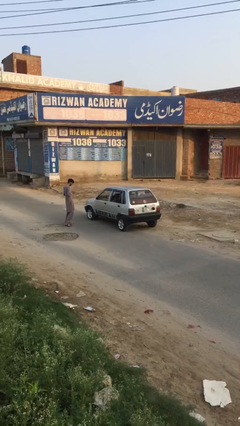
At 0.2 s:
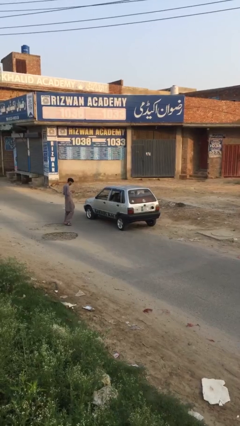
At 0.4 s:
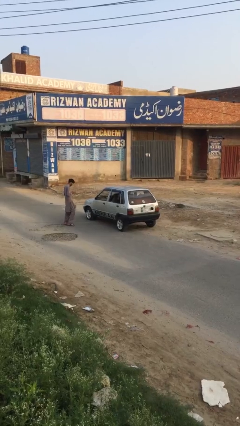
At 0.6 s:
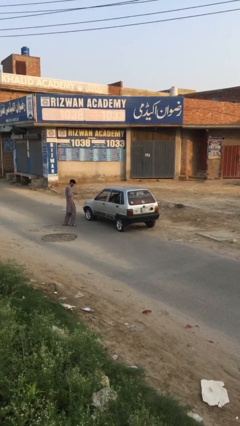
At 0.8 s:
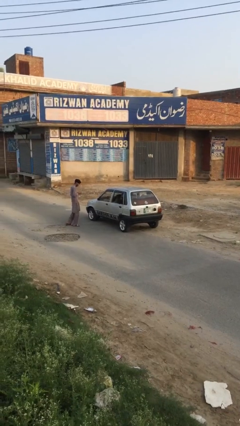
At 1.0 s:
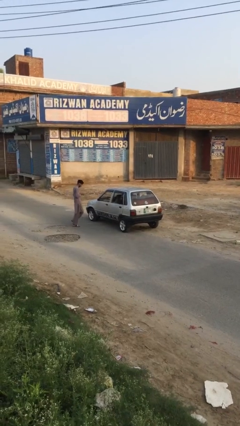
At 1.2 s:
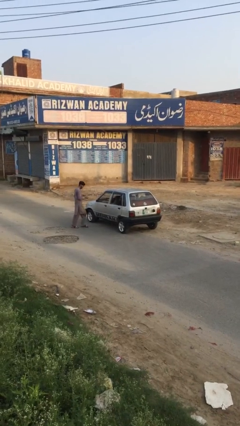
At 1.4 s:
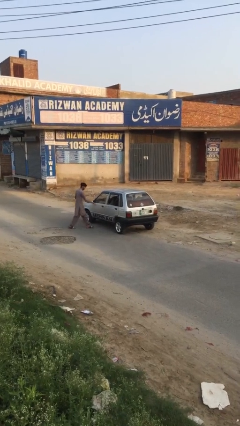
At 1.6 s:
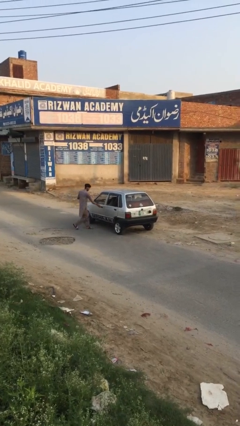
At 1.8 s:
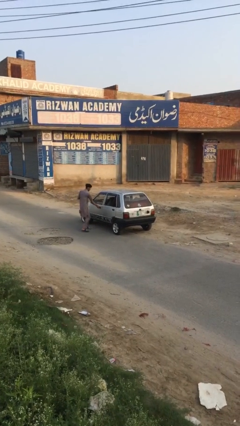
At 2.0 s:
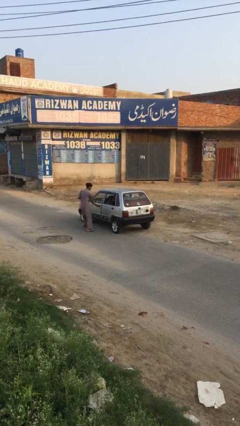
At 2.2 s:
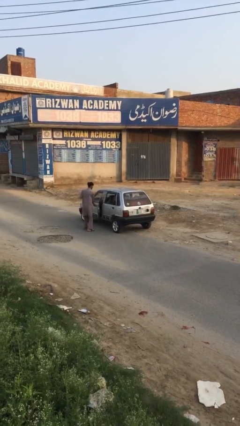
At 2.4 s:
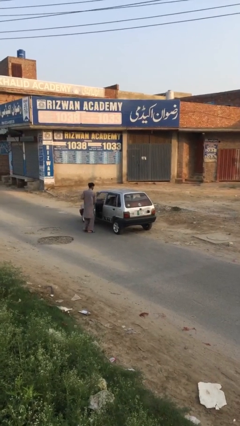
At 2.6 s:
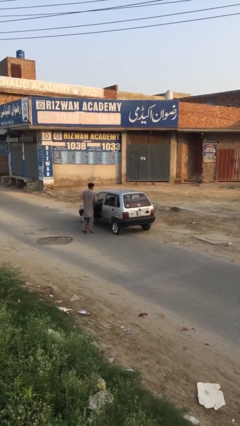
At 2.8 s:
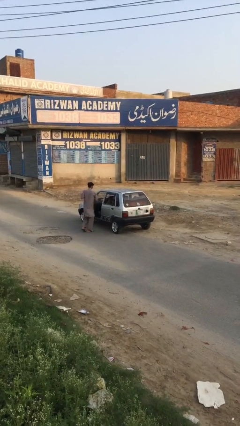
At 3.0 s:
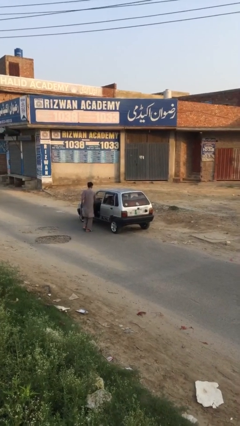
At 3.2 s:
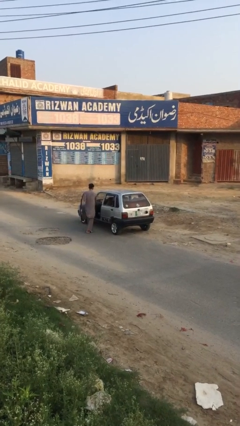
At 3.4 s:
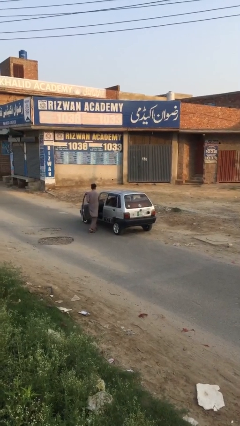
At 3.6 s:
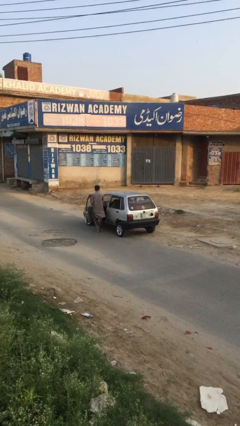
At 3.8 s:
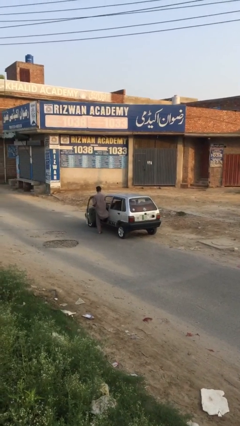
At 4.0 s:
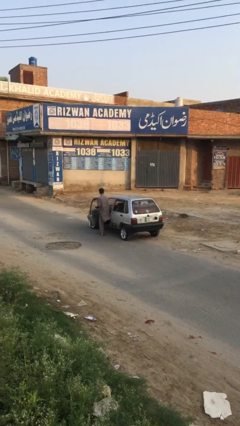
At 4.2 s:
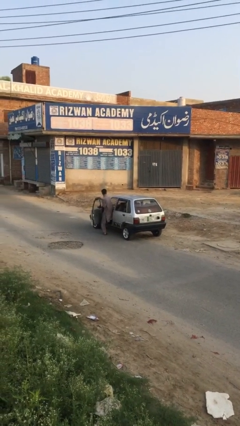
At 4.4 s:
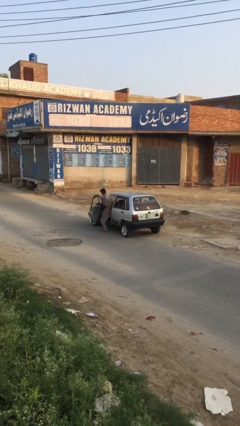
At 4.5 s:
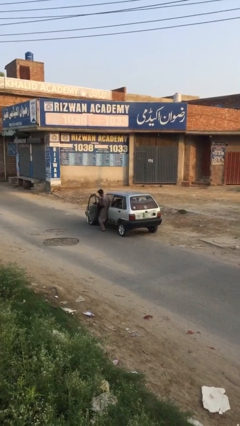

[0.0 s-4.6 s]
car picks up person

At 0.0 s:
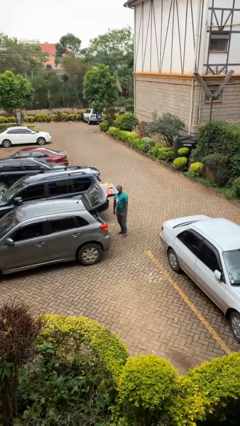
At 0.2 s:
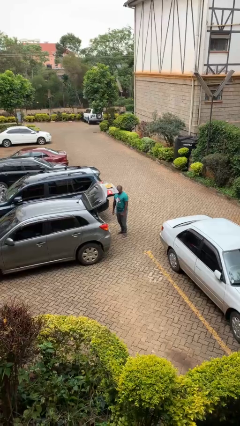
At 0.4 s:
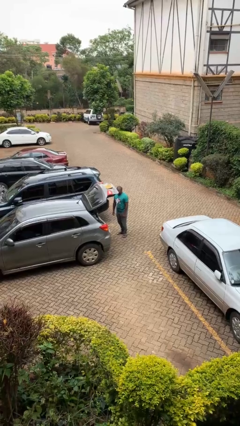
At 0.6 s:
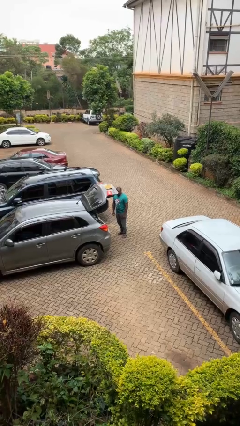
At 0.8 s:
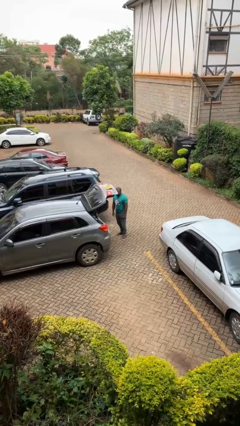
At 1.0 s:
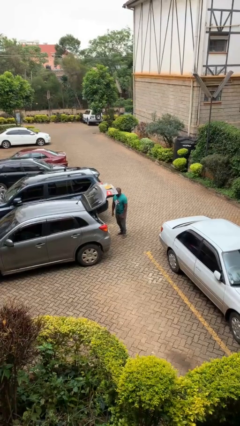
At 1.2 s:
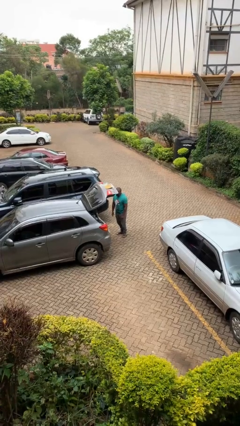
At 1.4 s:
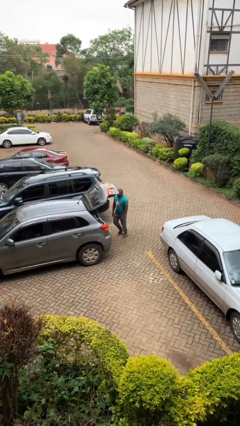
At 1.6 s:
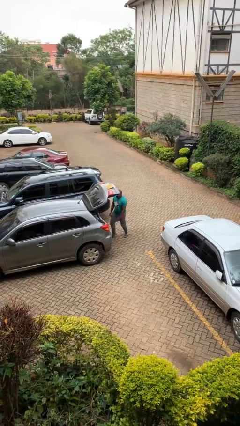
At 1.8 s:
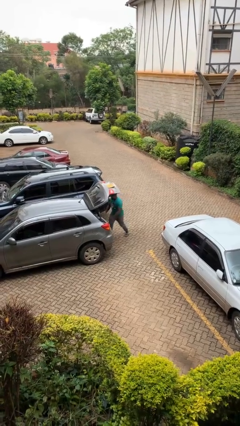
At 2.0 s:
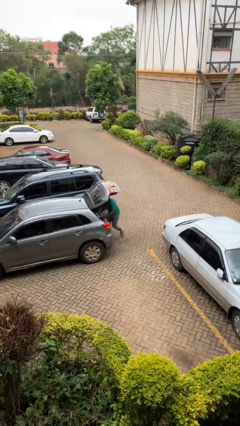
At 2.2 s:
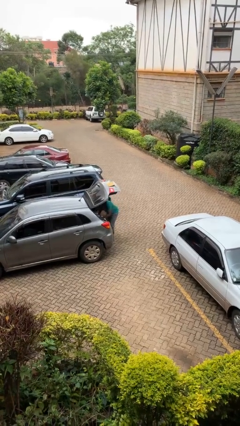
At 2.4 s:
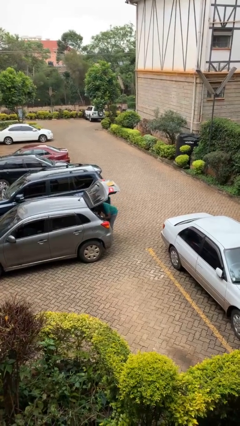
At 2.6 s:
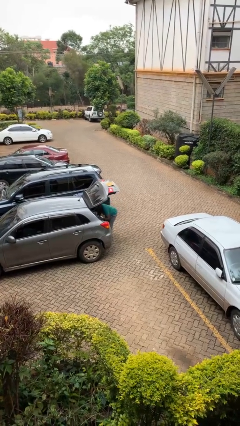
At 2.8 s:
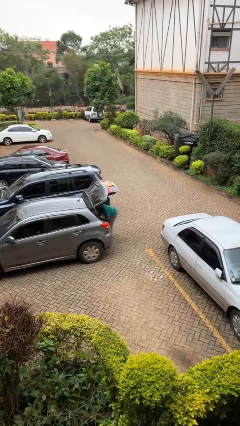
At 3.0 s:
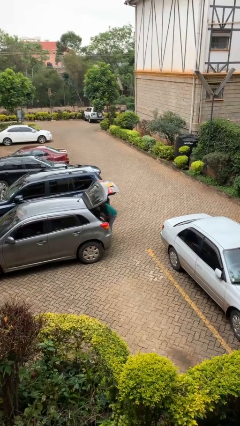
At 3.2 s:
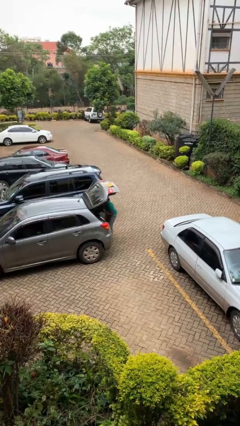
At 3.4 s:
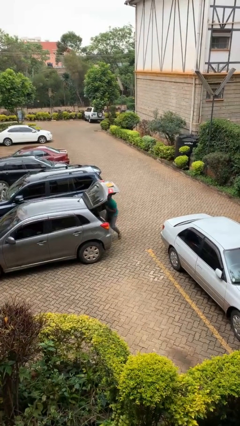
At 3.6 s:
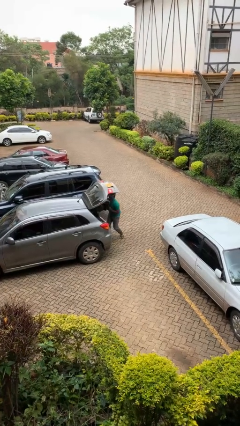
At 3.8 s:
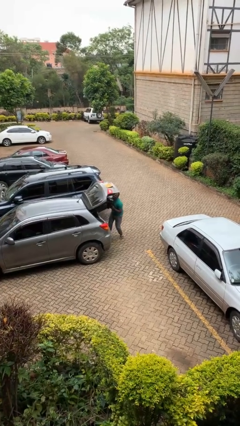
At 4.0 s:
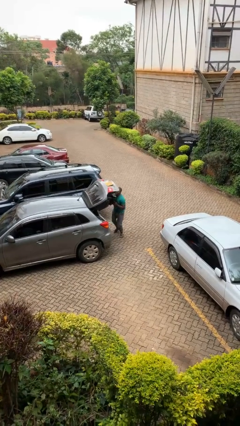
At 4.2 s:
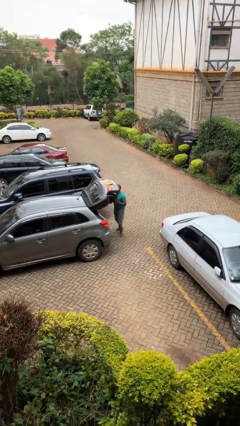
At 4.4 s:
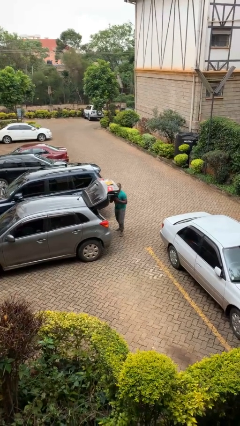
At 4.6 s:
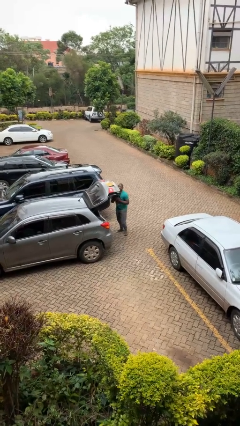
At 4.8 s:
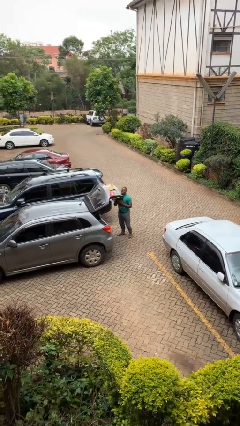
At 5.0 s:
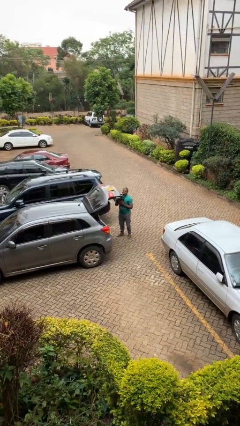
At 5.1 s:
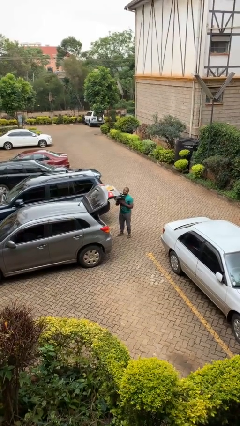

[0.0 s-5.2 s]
person unloads car

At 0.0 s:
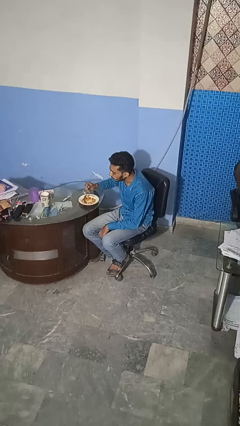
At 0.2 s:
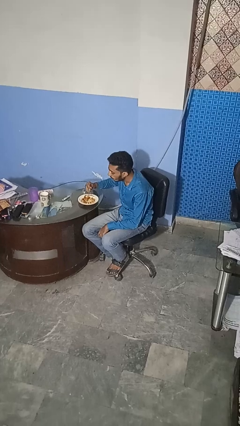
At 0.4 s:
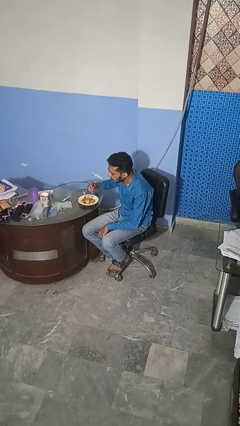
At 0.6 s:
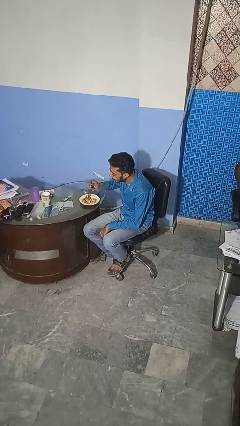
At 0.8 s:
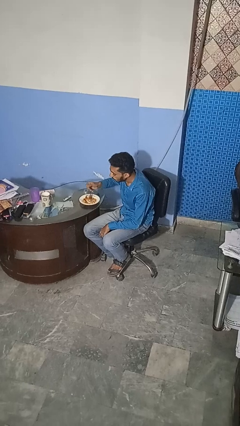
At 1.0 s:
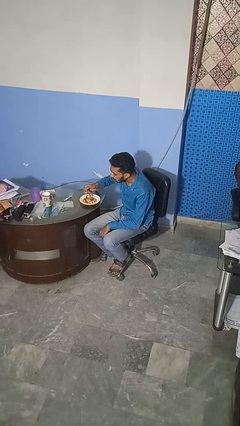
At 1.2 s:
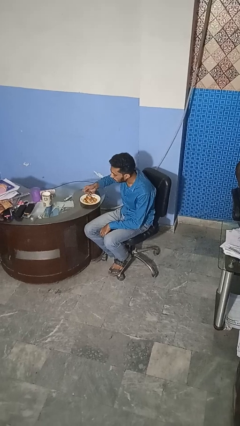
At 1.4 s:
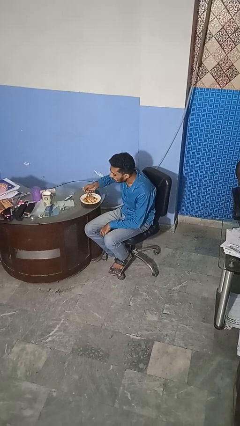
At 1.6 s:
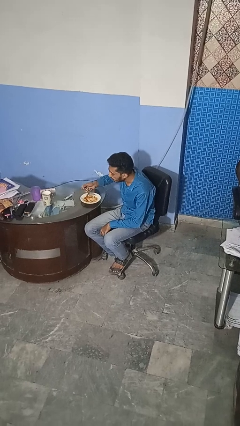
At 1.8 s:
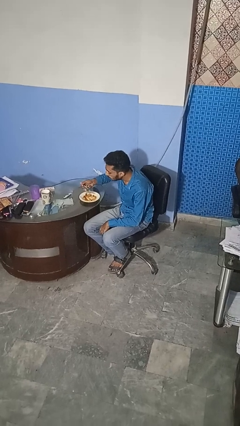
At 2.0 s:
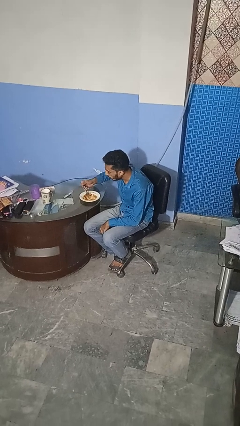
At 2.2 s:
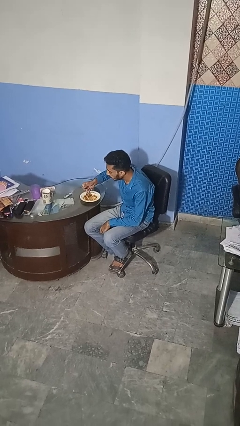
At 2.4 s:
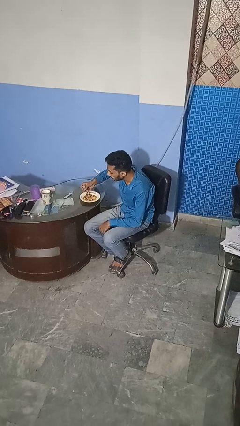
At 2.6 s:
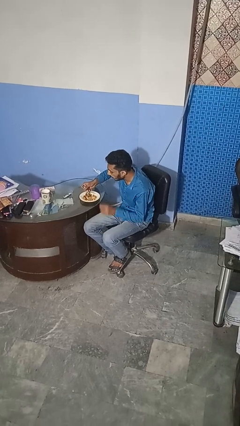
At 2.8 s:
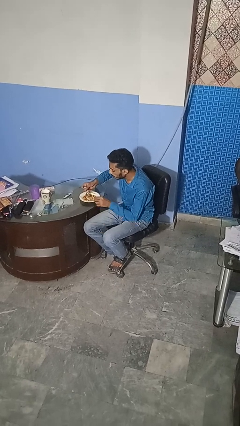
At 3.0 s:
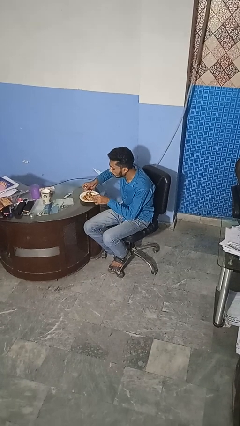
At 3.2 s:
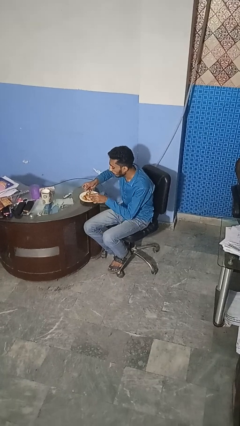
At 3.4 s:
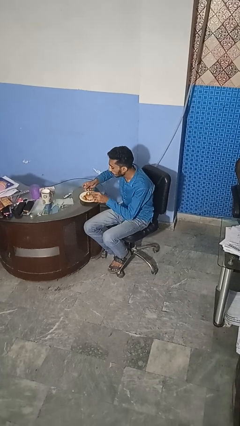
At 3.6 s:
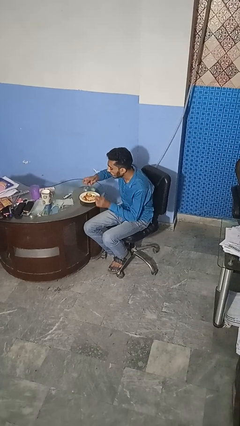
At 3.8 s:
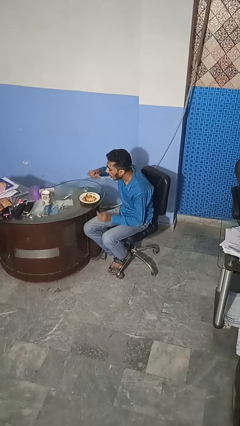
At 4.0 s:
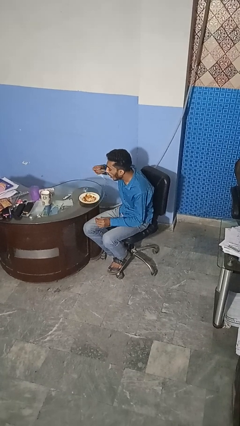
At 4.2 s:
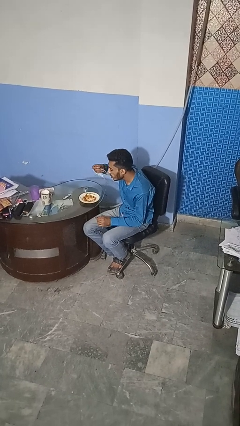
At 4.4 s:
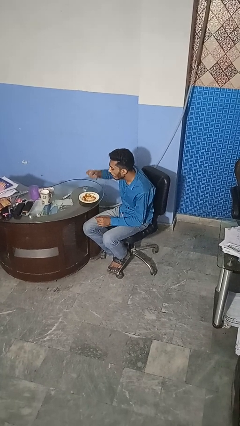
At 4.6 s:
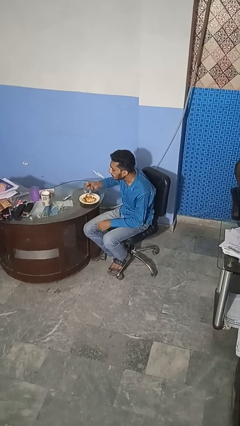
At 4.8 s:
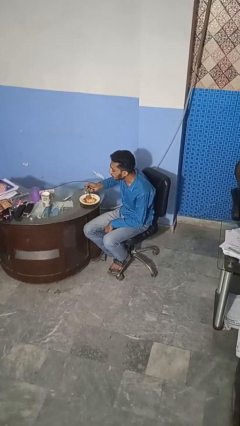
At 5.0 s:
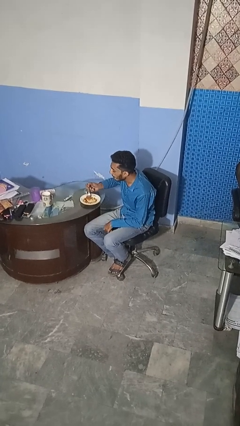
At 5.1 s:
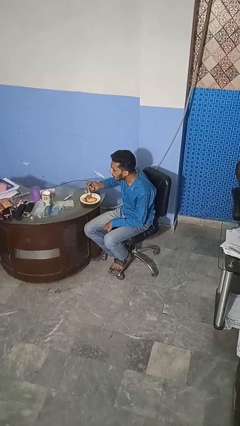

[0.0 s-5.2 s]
person eats with utensil

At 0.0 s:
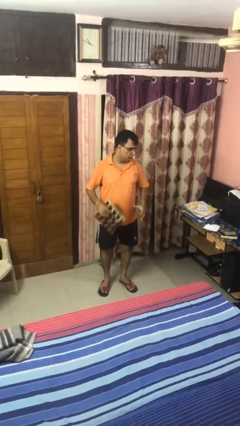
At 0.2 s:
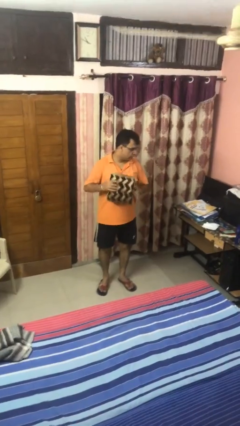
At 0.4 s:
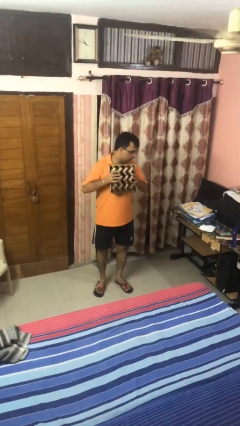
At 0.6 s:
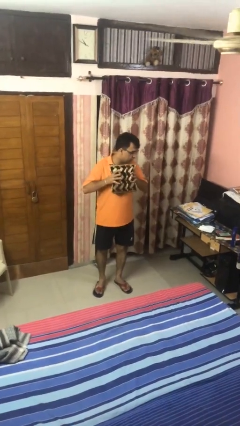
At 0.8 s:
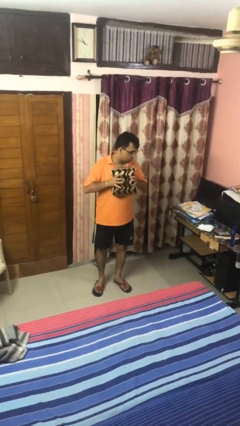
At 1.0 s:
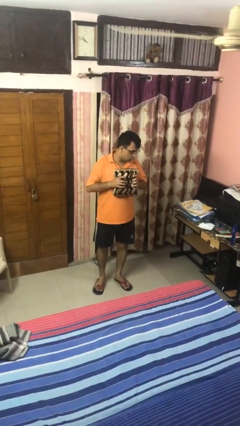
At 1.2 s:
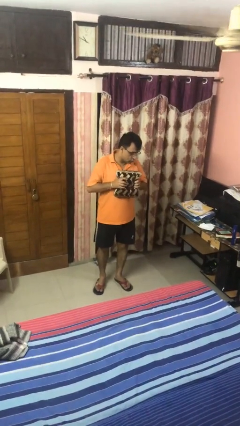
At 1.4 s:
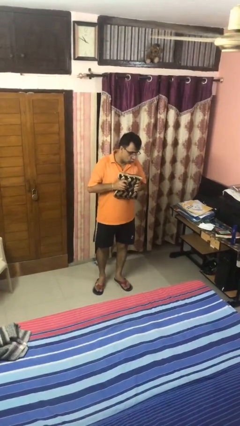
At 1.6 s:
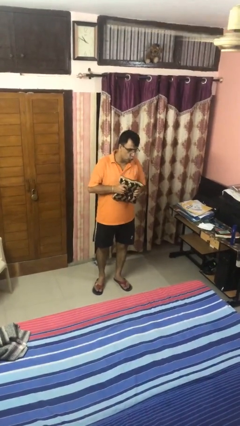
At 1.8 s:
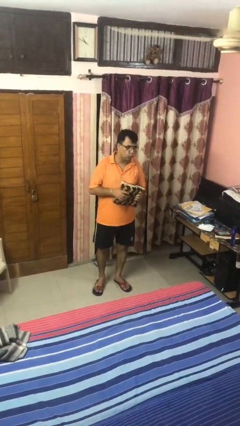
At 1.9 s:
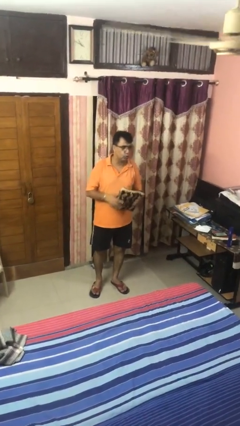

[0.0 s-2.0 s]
person squeezes object

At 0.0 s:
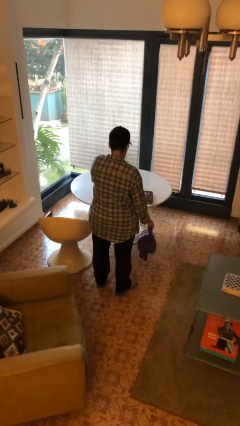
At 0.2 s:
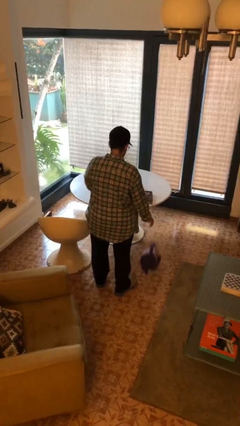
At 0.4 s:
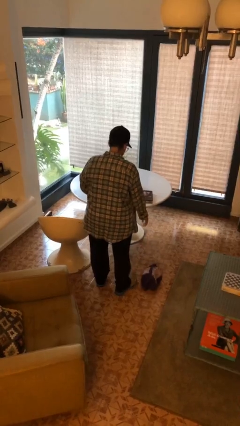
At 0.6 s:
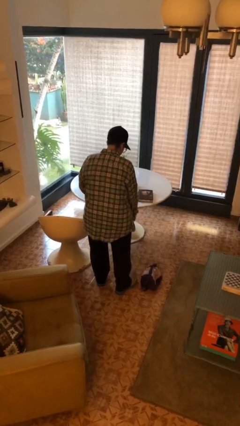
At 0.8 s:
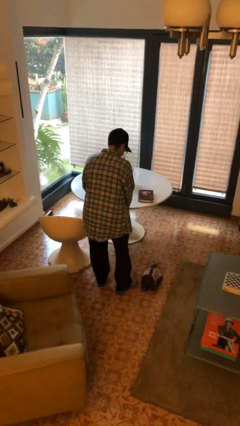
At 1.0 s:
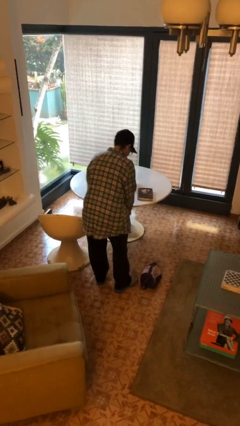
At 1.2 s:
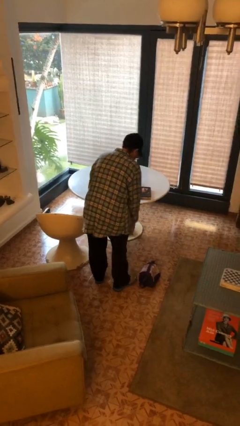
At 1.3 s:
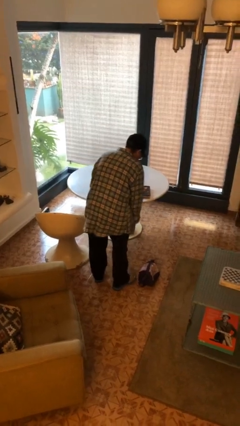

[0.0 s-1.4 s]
person drops object
